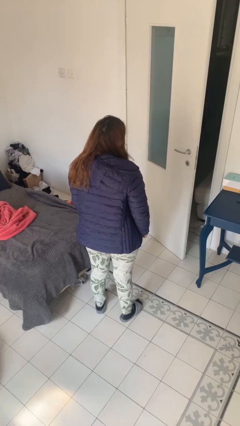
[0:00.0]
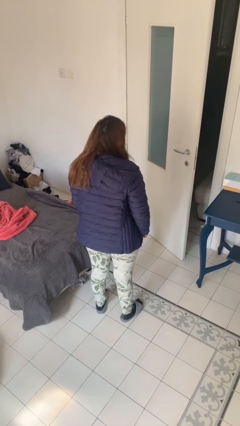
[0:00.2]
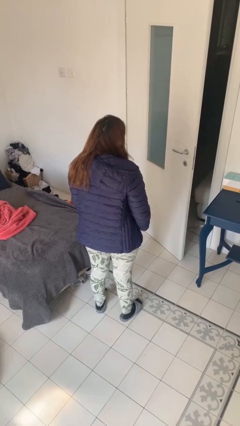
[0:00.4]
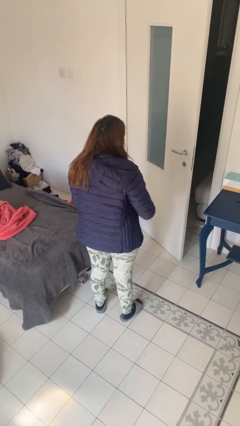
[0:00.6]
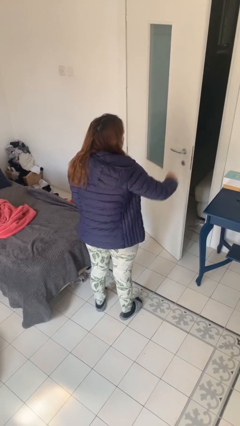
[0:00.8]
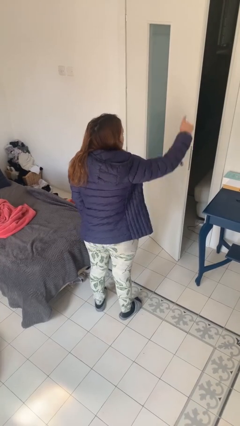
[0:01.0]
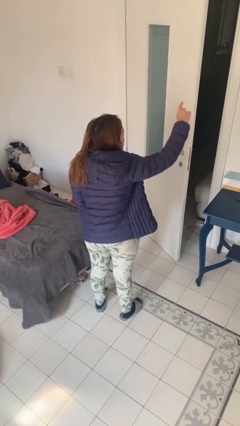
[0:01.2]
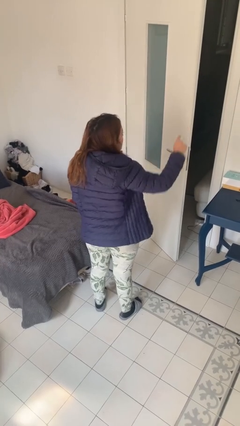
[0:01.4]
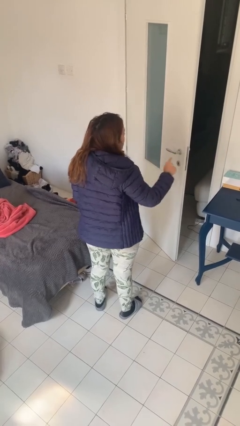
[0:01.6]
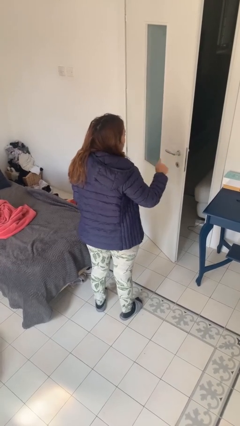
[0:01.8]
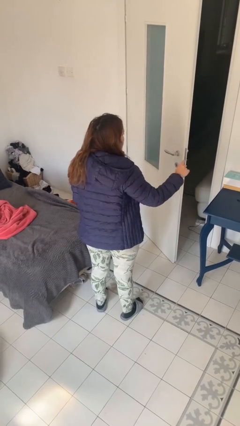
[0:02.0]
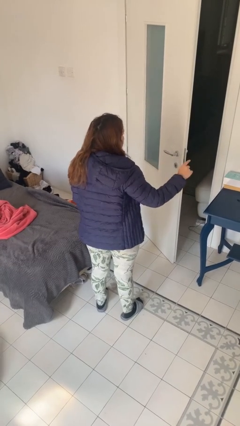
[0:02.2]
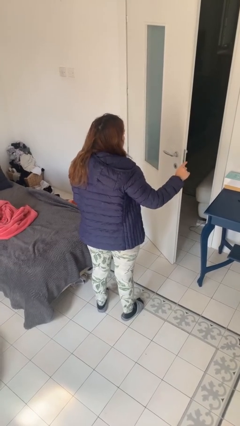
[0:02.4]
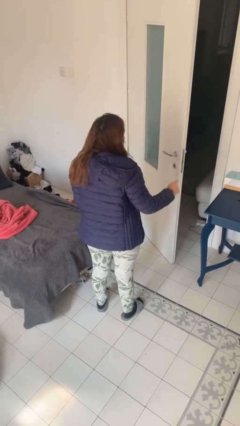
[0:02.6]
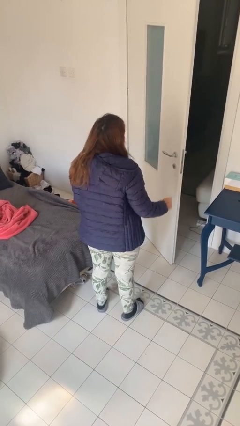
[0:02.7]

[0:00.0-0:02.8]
person gestures number one

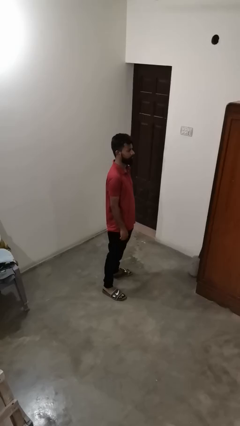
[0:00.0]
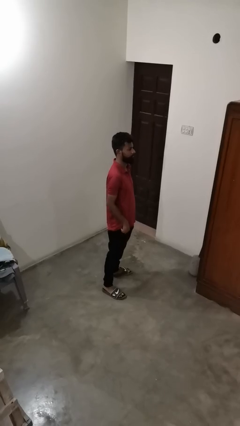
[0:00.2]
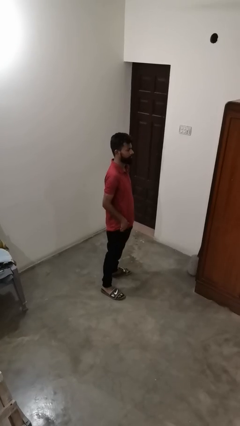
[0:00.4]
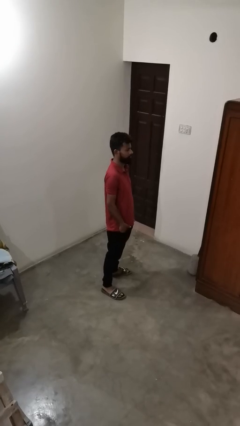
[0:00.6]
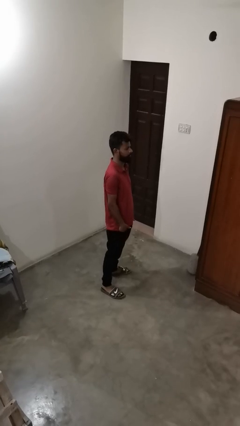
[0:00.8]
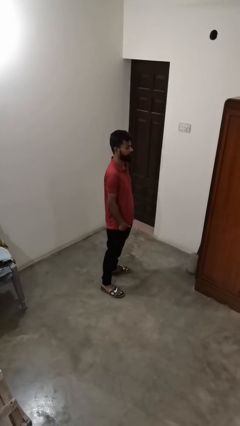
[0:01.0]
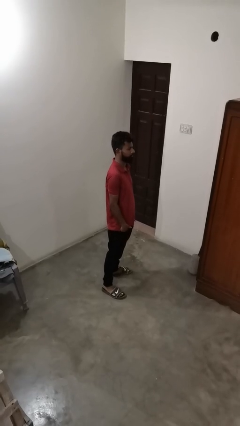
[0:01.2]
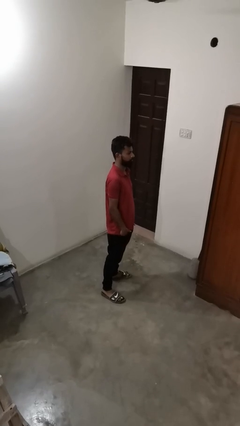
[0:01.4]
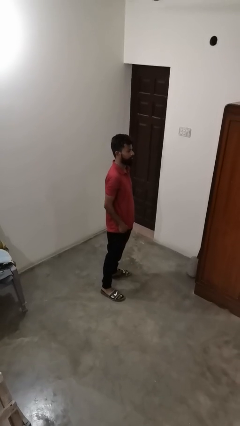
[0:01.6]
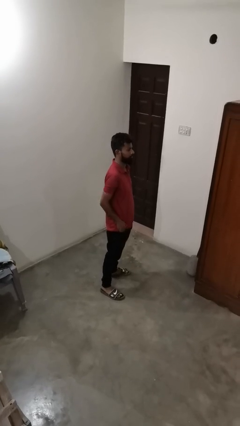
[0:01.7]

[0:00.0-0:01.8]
person puts hands in back pockets

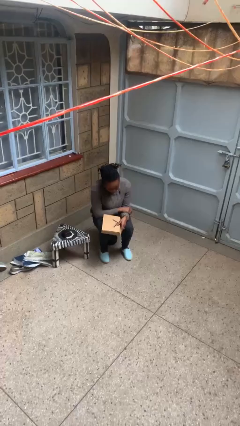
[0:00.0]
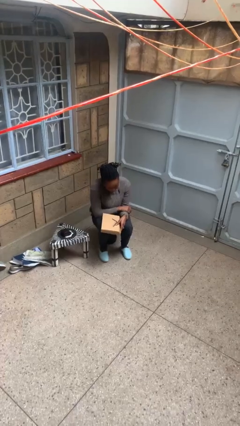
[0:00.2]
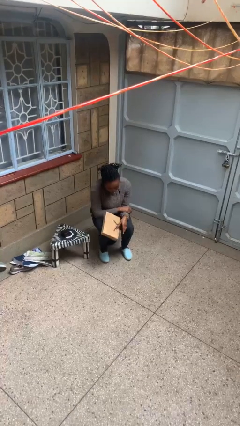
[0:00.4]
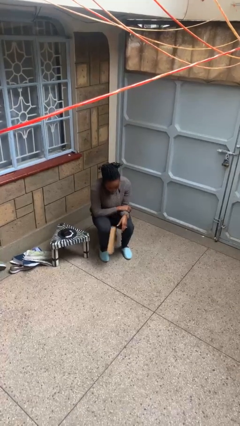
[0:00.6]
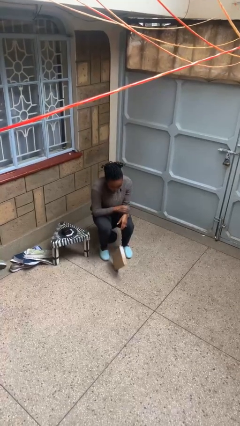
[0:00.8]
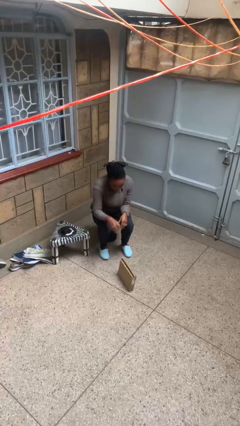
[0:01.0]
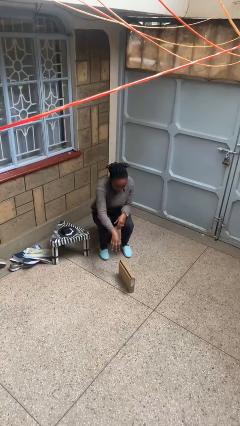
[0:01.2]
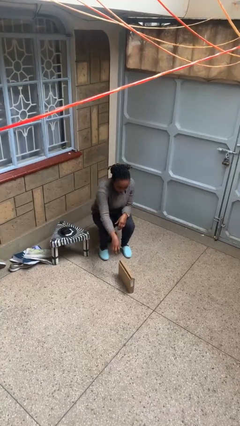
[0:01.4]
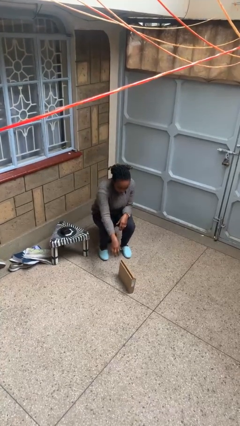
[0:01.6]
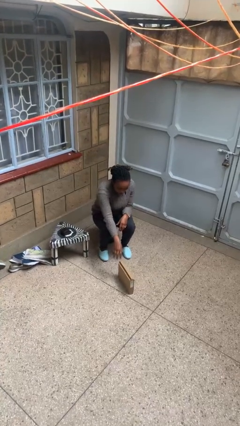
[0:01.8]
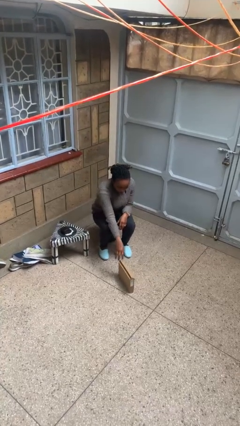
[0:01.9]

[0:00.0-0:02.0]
person drops object

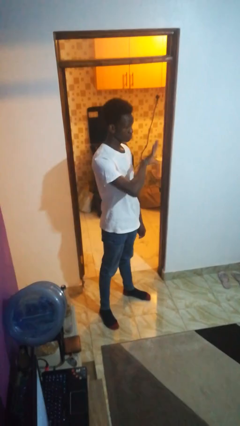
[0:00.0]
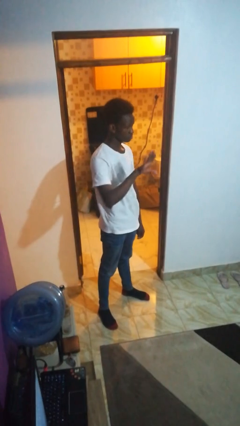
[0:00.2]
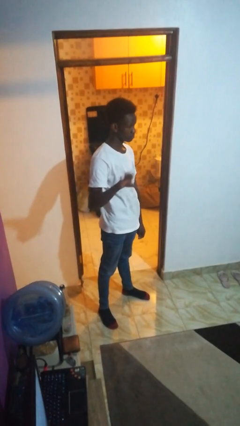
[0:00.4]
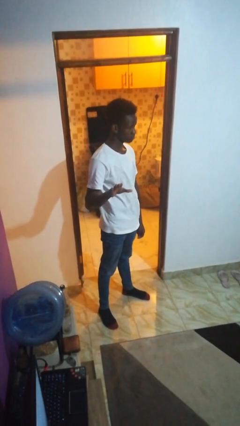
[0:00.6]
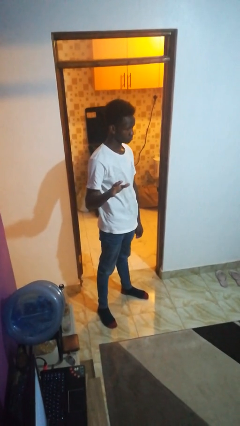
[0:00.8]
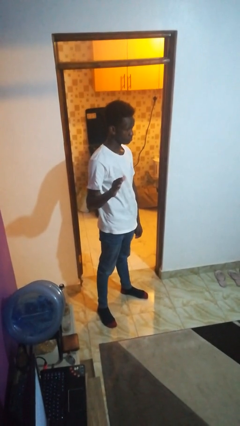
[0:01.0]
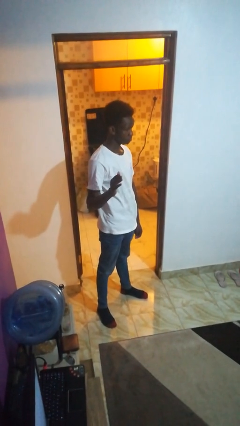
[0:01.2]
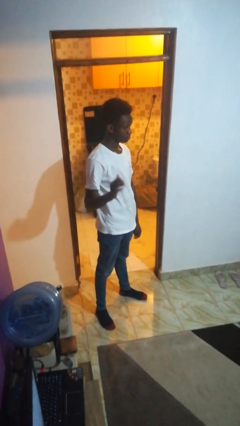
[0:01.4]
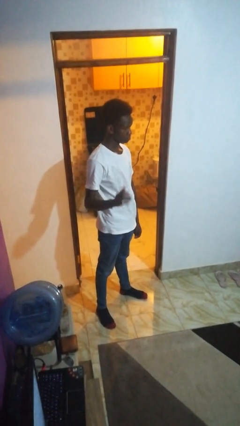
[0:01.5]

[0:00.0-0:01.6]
person gestures swipe right

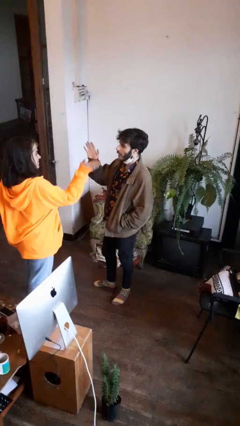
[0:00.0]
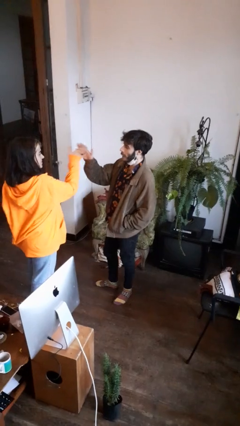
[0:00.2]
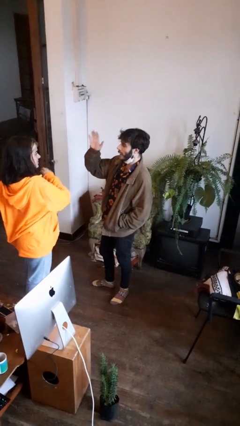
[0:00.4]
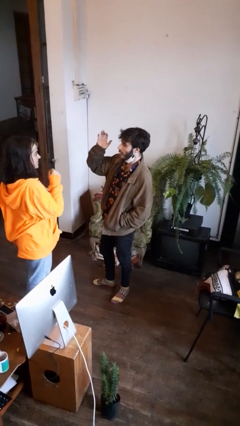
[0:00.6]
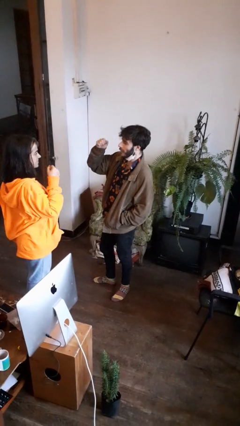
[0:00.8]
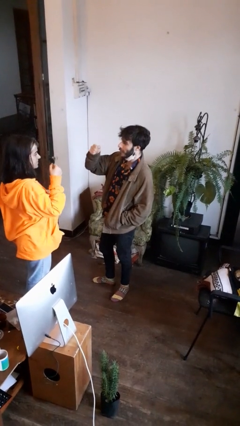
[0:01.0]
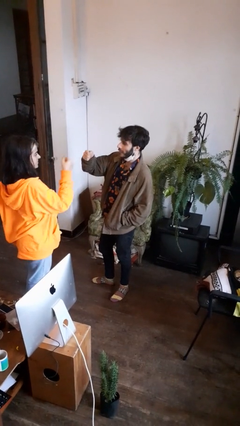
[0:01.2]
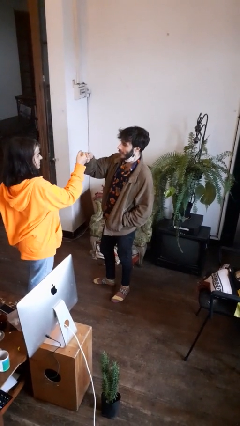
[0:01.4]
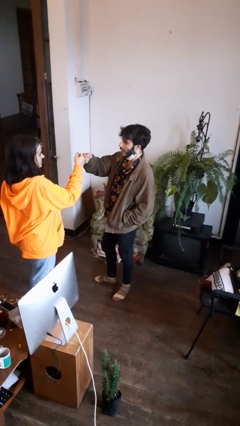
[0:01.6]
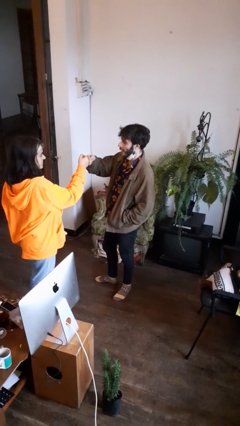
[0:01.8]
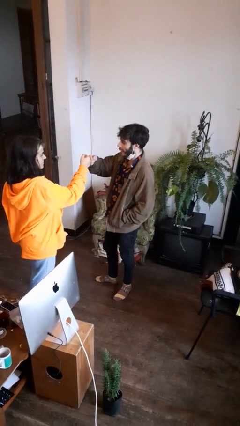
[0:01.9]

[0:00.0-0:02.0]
person highfives hand

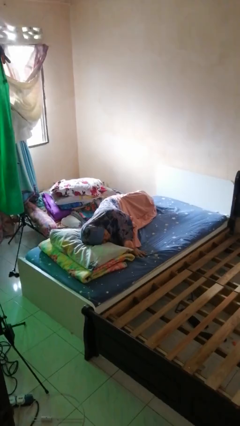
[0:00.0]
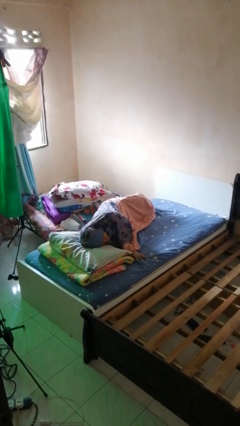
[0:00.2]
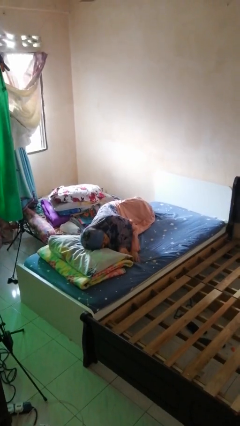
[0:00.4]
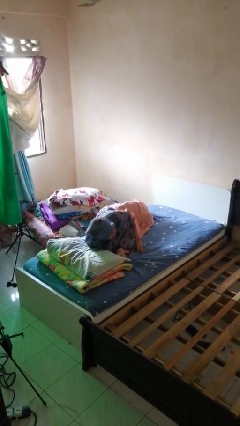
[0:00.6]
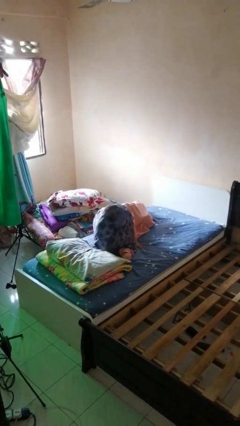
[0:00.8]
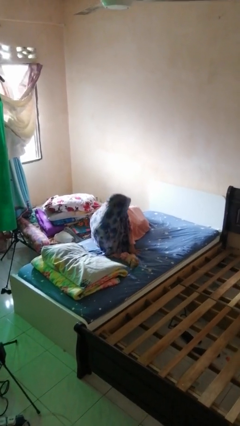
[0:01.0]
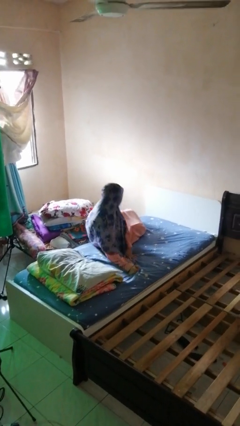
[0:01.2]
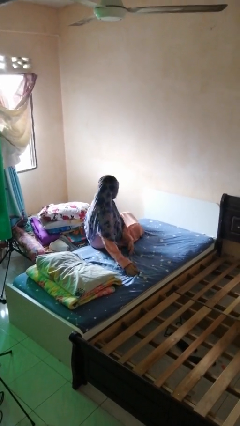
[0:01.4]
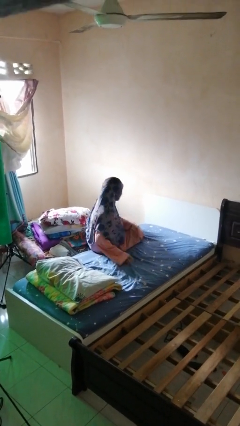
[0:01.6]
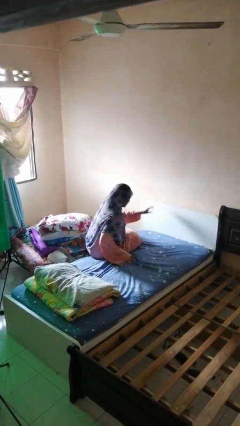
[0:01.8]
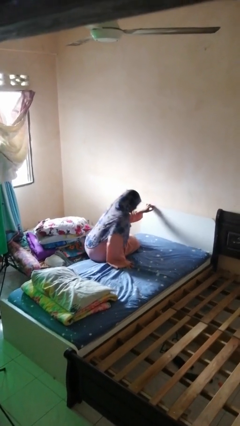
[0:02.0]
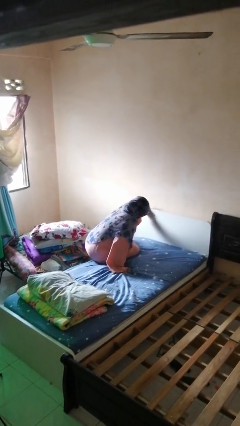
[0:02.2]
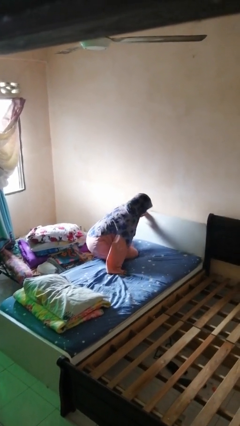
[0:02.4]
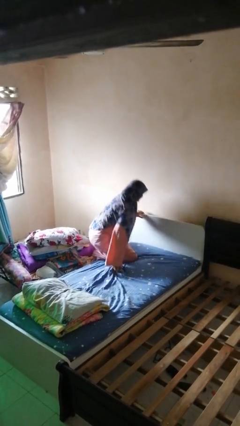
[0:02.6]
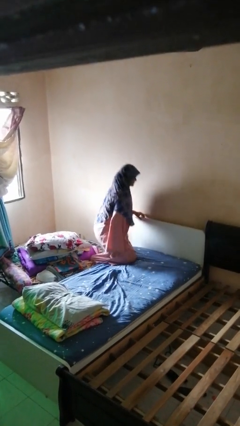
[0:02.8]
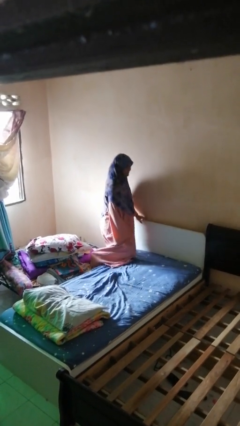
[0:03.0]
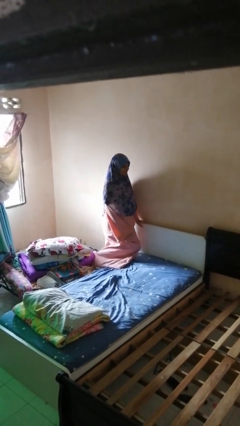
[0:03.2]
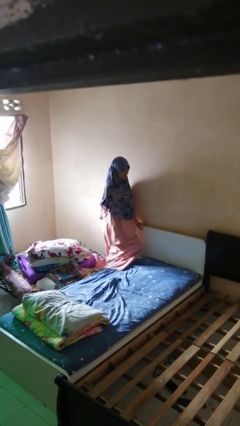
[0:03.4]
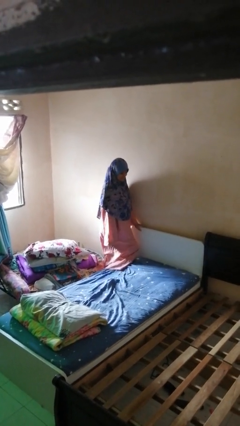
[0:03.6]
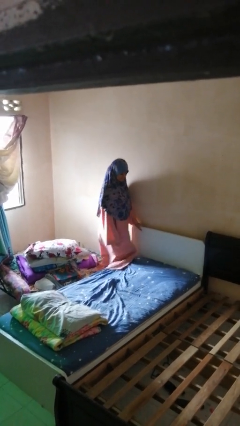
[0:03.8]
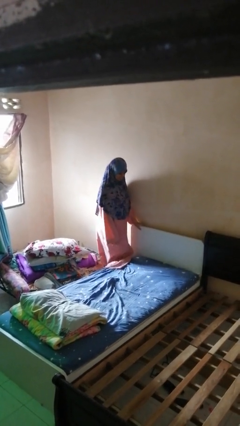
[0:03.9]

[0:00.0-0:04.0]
person stands up

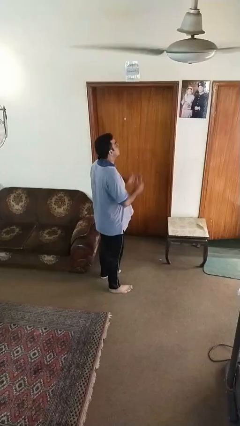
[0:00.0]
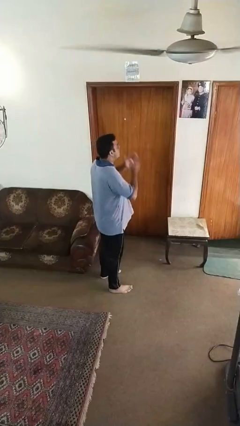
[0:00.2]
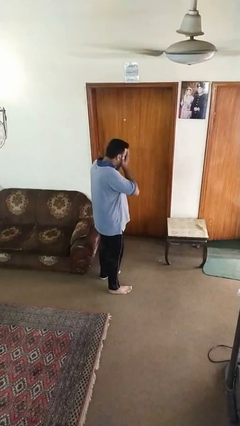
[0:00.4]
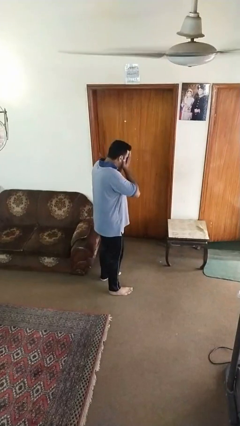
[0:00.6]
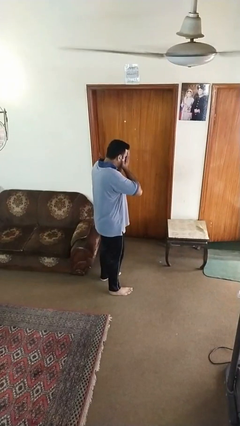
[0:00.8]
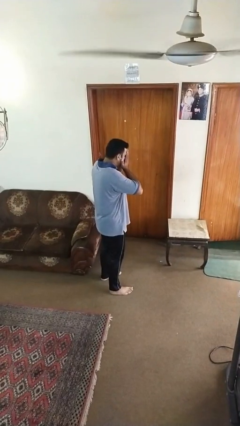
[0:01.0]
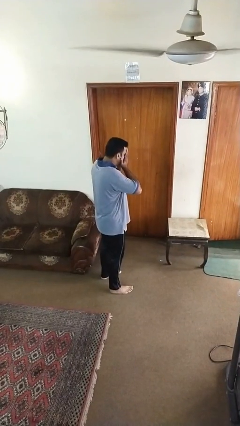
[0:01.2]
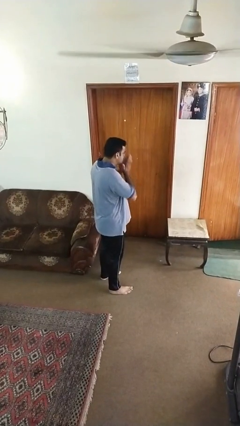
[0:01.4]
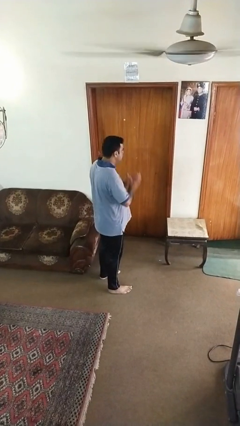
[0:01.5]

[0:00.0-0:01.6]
person sneezes into hand

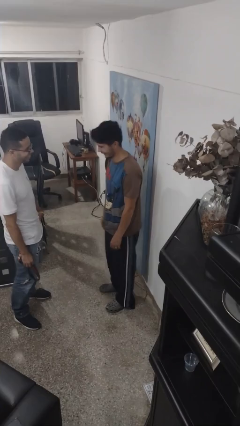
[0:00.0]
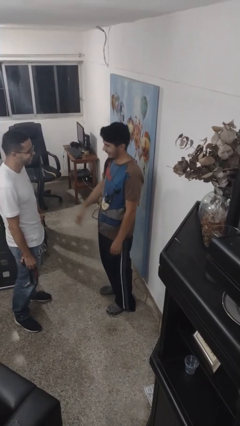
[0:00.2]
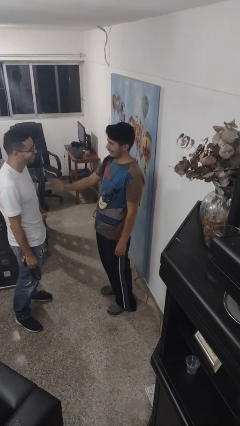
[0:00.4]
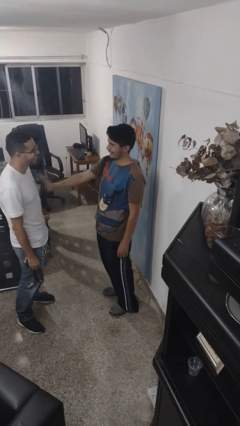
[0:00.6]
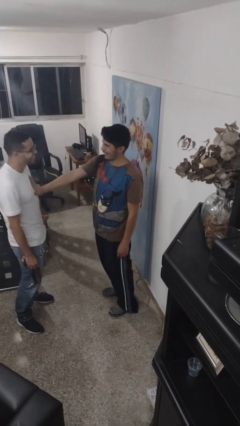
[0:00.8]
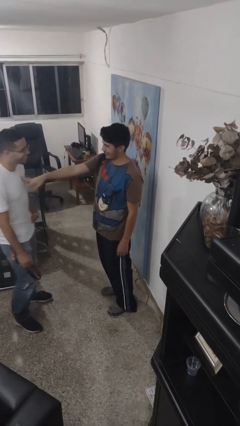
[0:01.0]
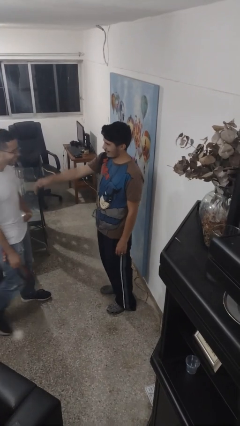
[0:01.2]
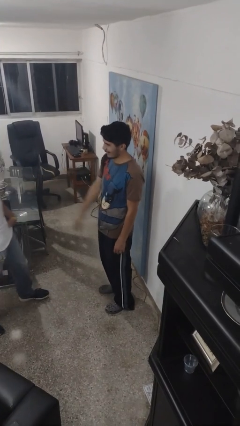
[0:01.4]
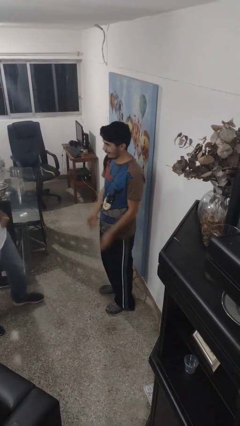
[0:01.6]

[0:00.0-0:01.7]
person shoves person
